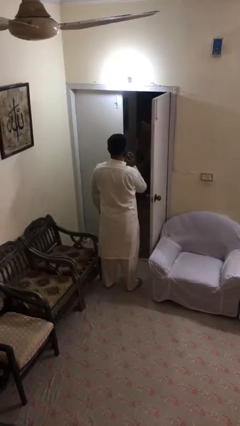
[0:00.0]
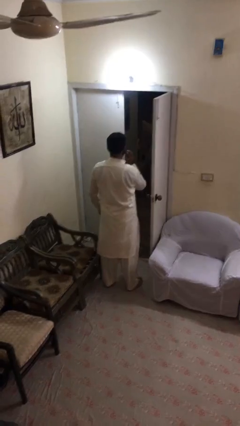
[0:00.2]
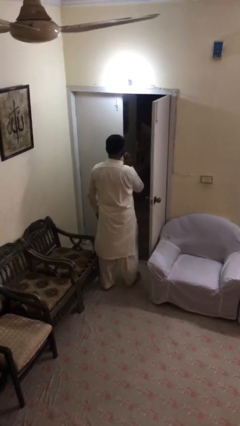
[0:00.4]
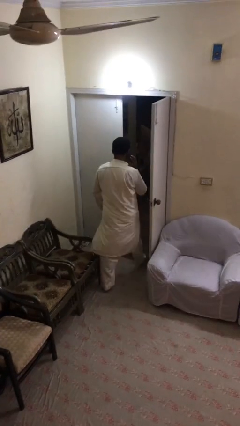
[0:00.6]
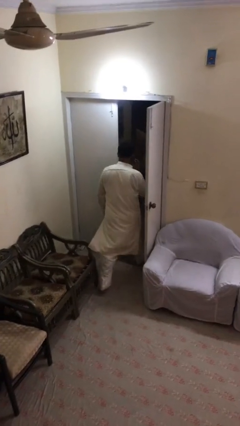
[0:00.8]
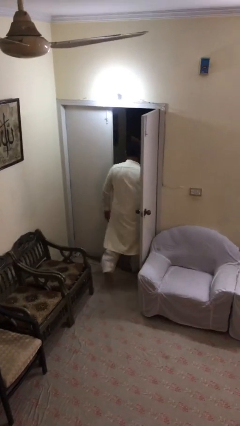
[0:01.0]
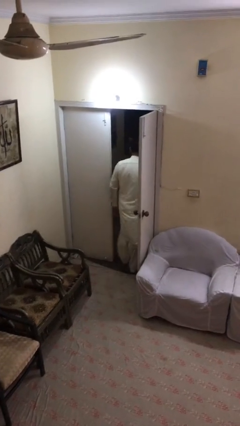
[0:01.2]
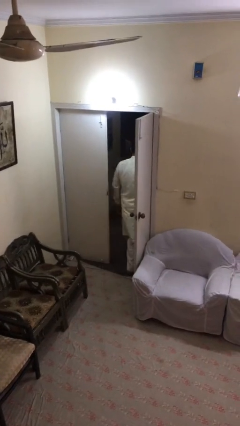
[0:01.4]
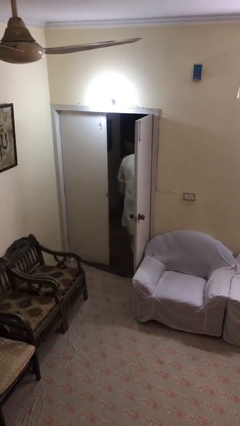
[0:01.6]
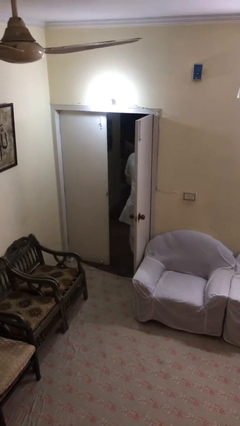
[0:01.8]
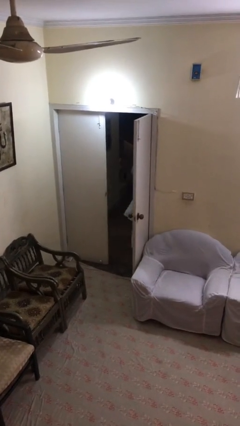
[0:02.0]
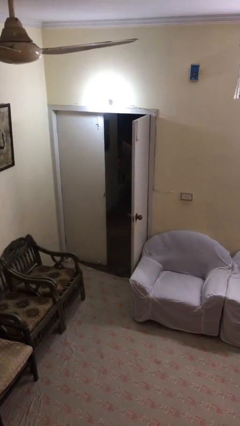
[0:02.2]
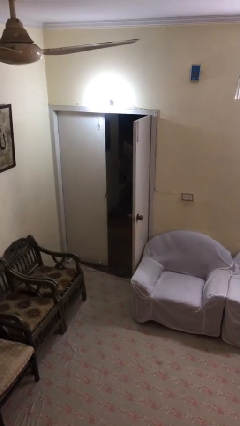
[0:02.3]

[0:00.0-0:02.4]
person exits scene through structure

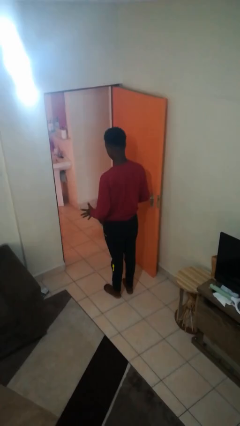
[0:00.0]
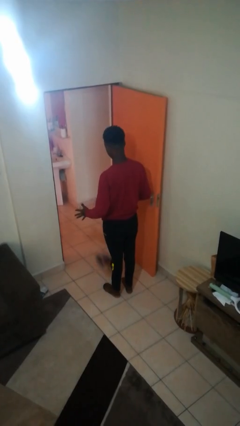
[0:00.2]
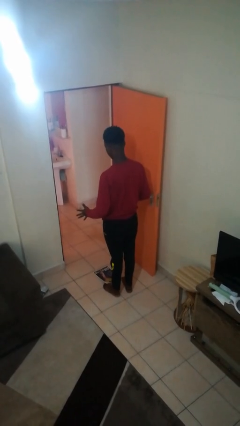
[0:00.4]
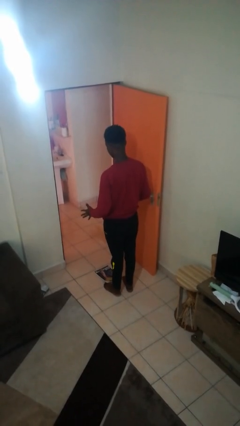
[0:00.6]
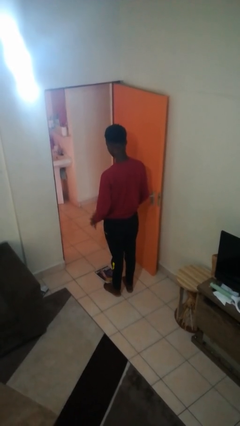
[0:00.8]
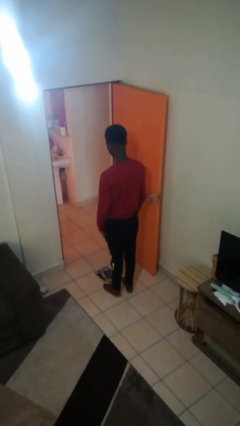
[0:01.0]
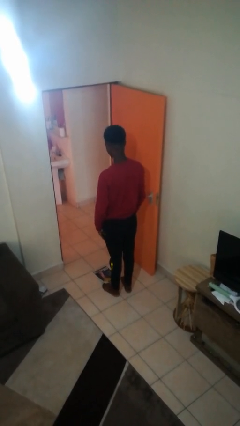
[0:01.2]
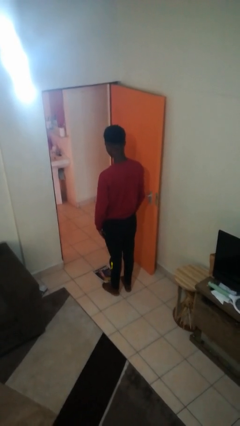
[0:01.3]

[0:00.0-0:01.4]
person drops object

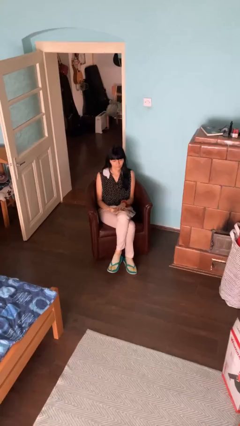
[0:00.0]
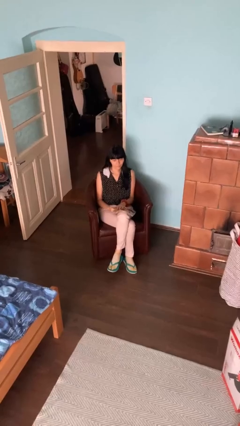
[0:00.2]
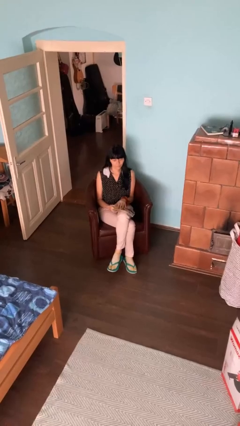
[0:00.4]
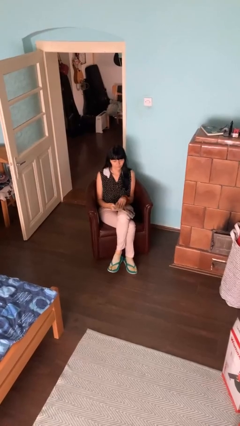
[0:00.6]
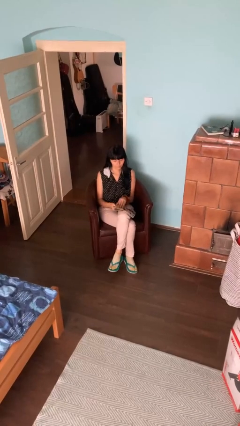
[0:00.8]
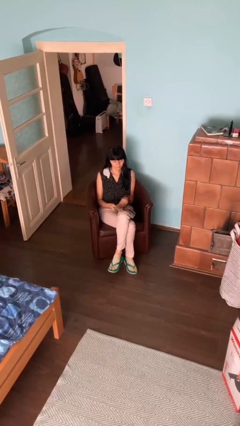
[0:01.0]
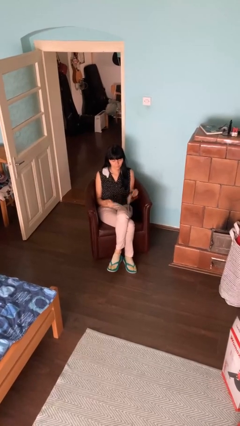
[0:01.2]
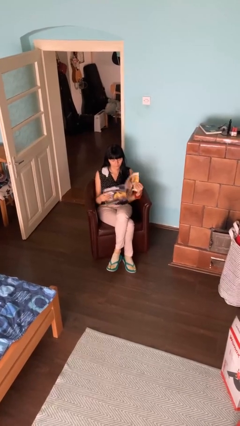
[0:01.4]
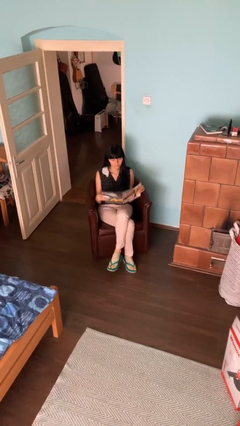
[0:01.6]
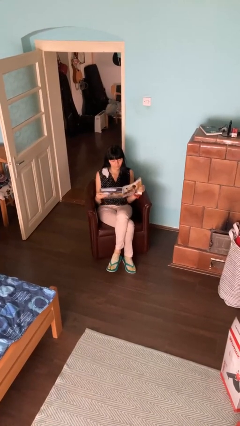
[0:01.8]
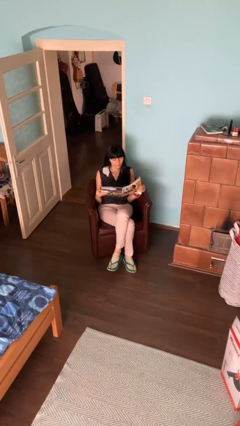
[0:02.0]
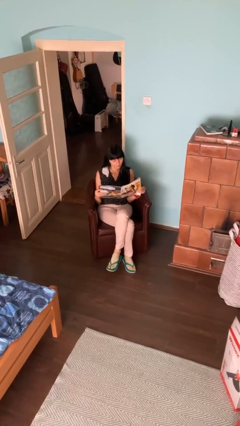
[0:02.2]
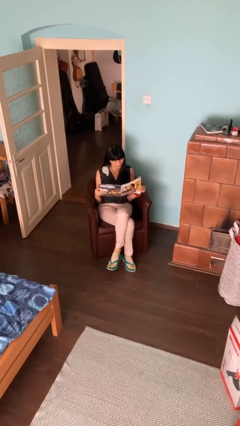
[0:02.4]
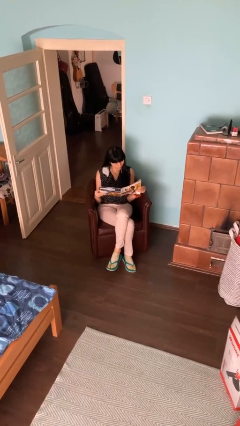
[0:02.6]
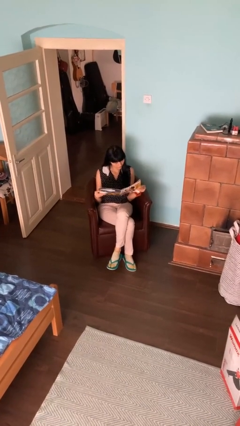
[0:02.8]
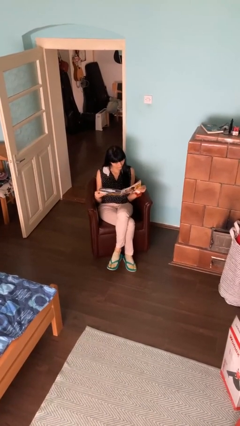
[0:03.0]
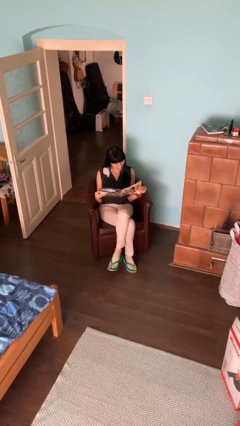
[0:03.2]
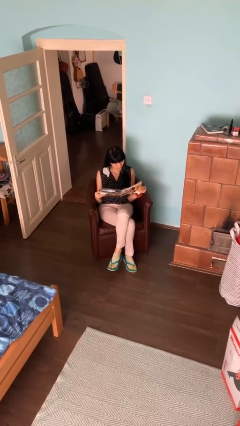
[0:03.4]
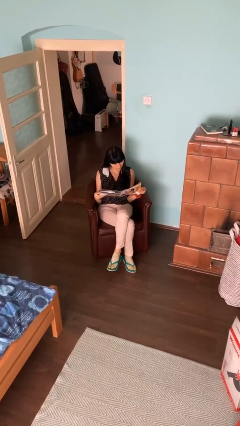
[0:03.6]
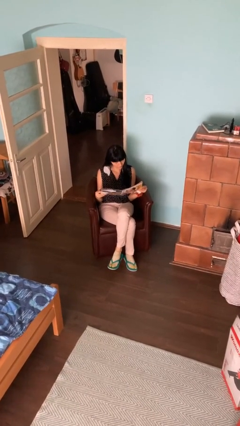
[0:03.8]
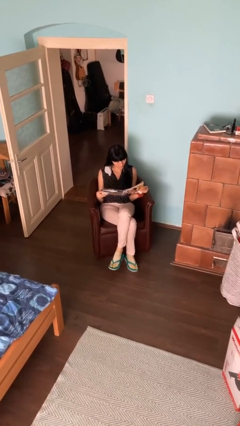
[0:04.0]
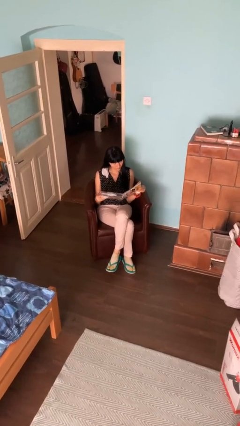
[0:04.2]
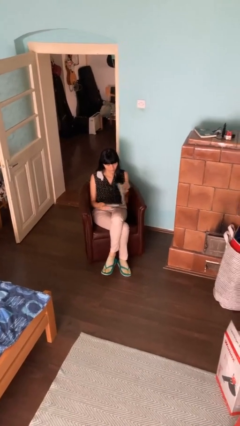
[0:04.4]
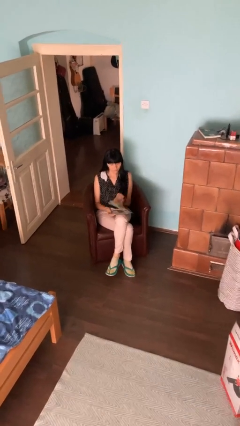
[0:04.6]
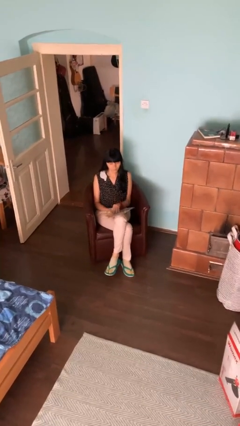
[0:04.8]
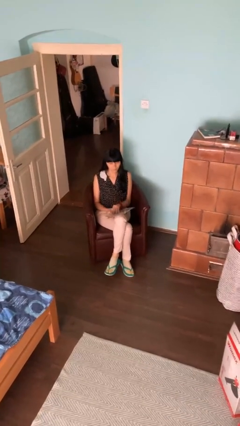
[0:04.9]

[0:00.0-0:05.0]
person reads magazine

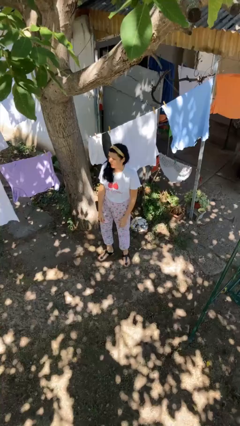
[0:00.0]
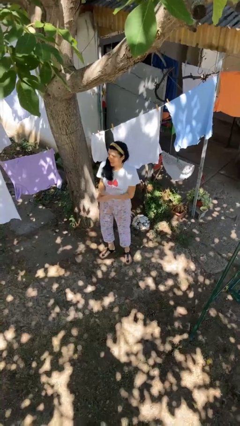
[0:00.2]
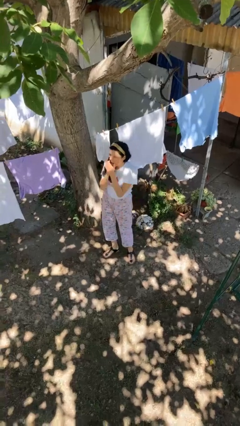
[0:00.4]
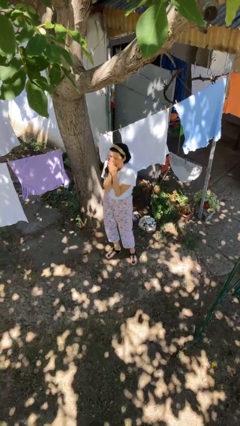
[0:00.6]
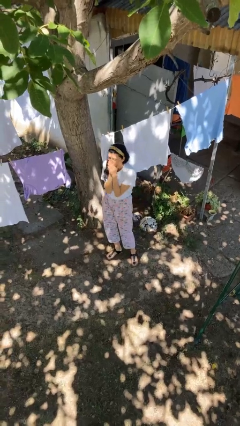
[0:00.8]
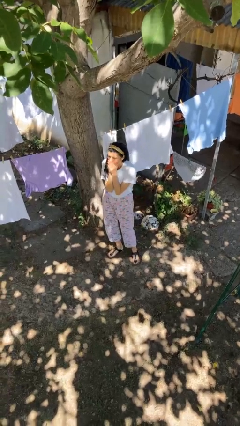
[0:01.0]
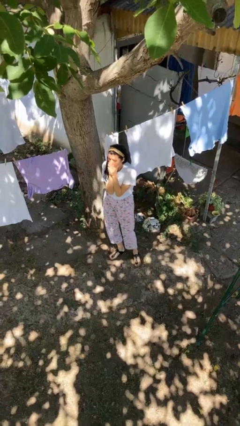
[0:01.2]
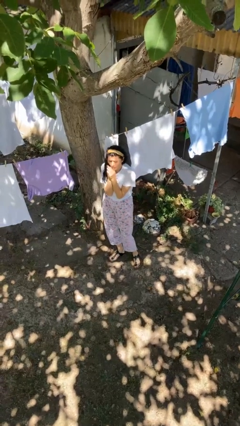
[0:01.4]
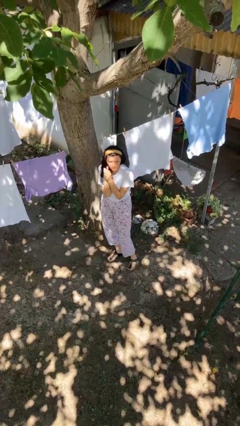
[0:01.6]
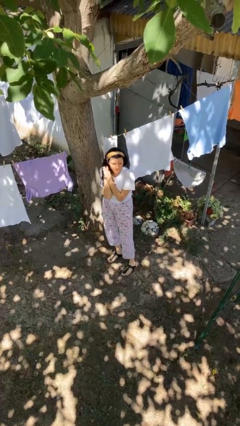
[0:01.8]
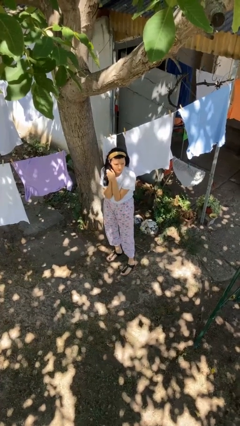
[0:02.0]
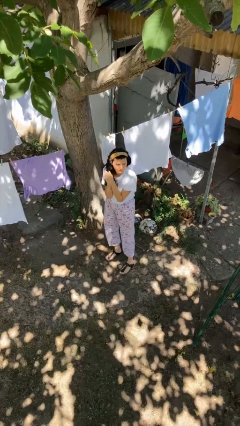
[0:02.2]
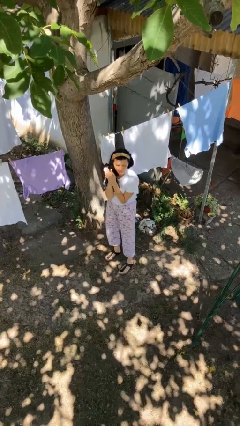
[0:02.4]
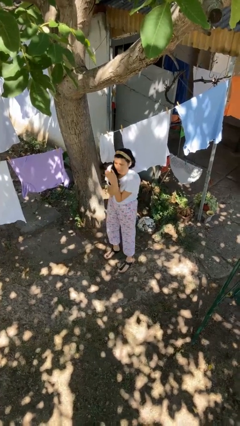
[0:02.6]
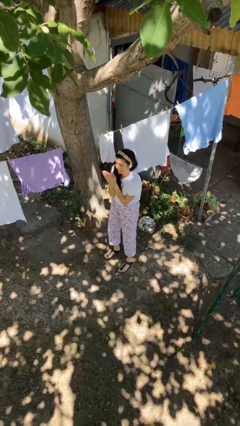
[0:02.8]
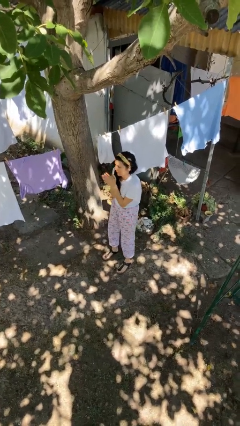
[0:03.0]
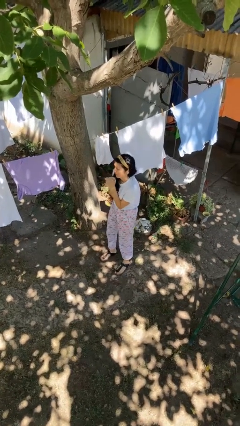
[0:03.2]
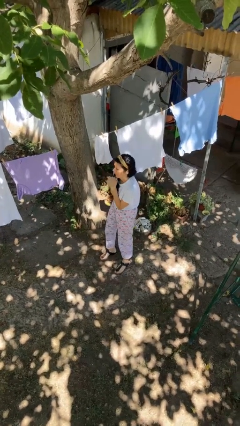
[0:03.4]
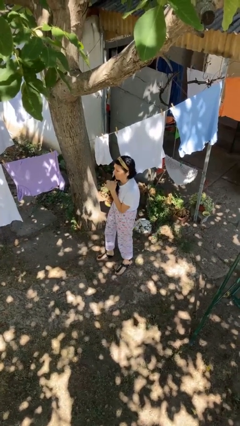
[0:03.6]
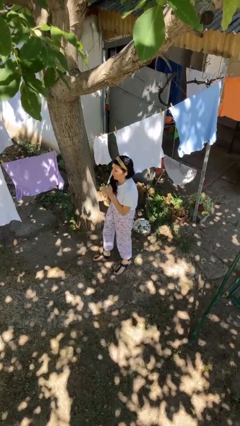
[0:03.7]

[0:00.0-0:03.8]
person blows into hands

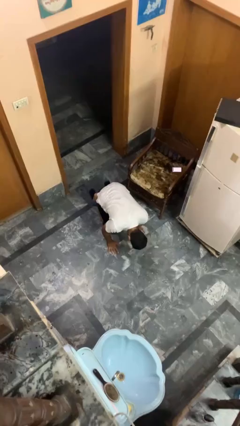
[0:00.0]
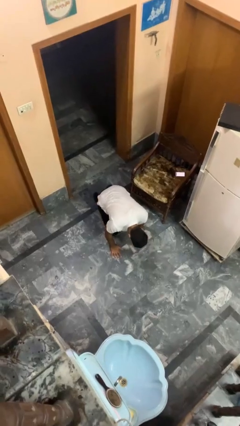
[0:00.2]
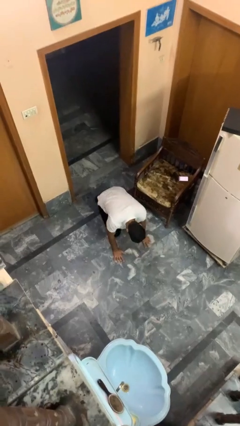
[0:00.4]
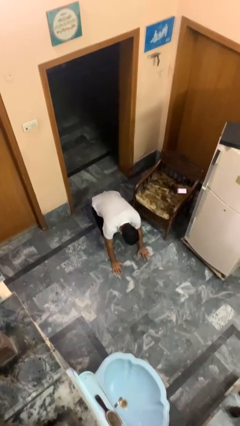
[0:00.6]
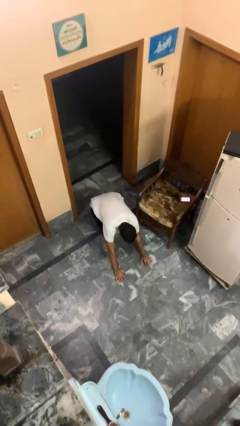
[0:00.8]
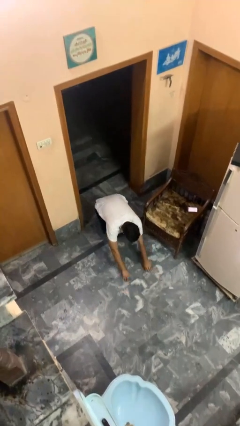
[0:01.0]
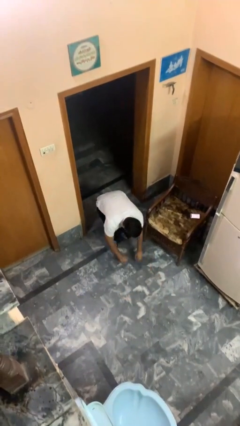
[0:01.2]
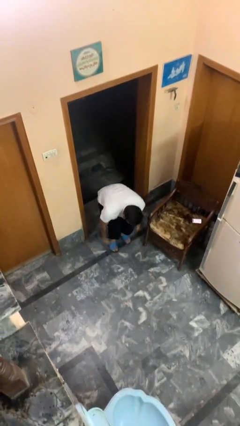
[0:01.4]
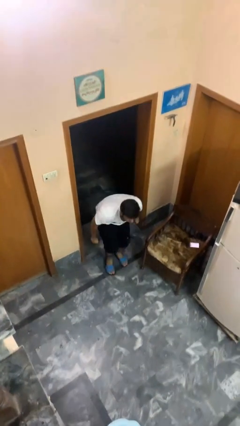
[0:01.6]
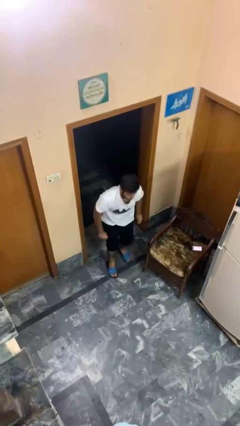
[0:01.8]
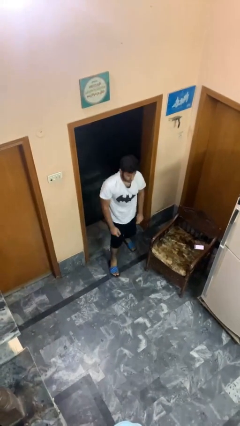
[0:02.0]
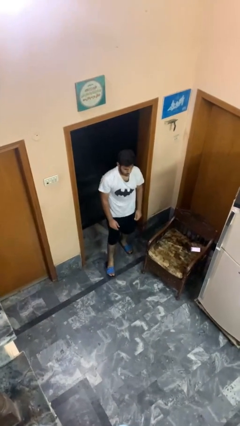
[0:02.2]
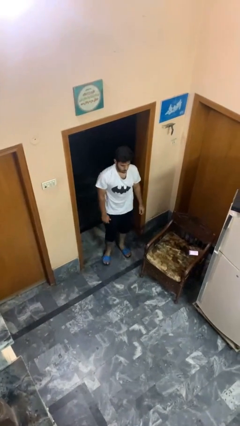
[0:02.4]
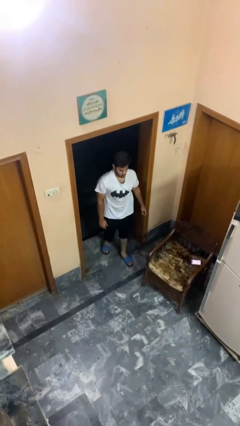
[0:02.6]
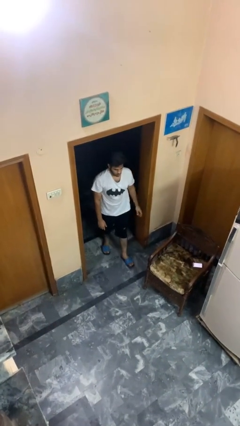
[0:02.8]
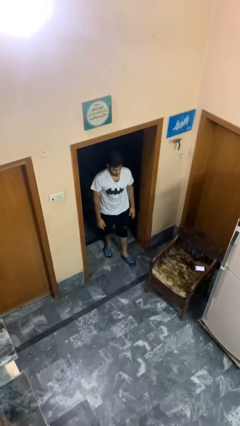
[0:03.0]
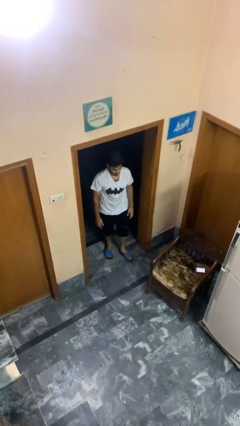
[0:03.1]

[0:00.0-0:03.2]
person stands up from floor

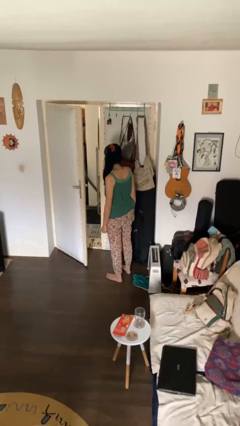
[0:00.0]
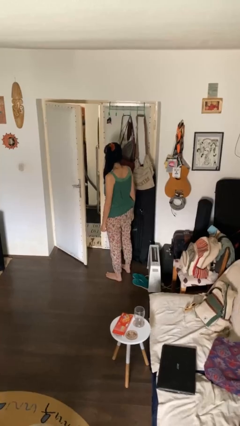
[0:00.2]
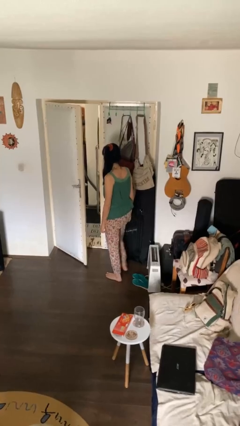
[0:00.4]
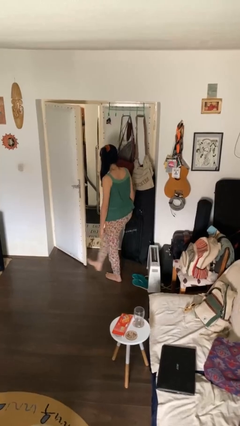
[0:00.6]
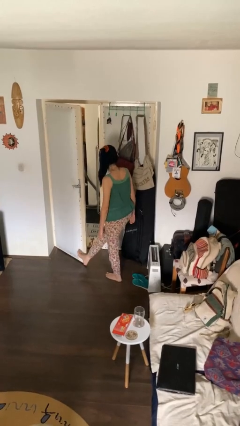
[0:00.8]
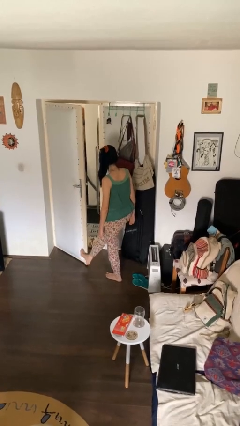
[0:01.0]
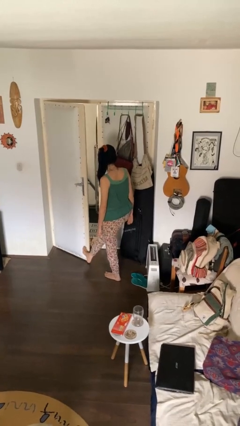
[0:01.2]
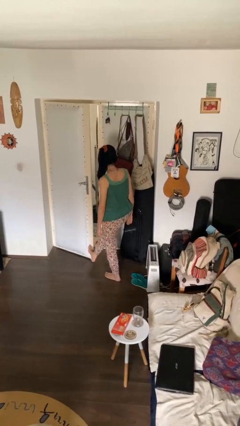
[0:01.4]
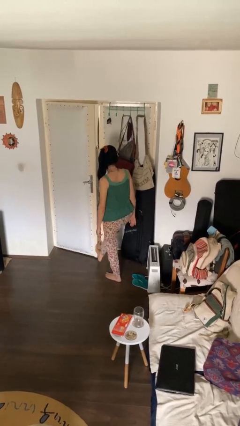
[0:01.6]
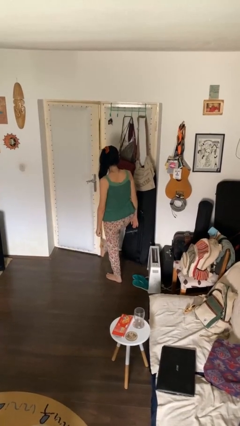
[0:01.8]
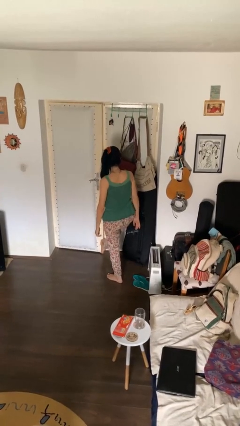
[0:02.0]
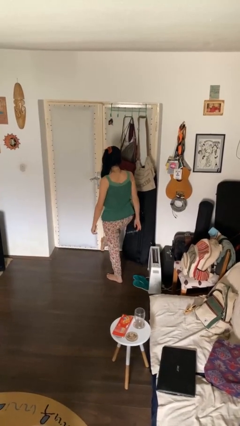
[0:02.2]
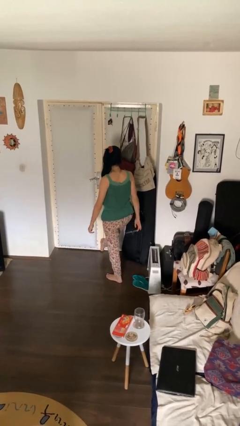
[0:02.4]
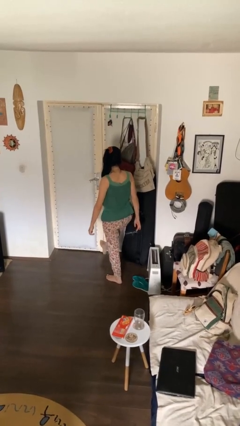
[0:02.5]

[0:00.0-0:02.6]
person closes door with foot
